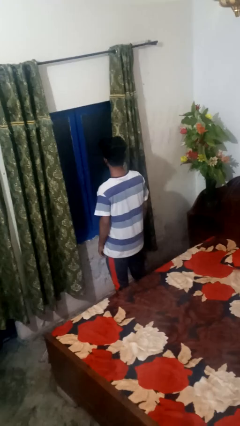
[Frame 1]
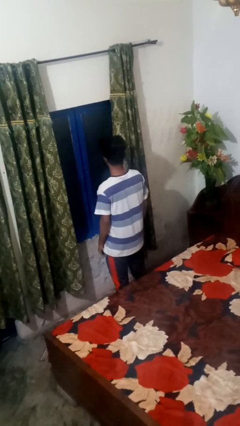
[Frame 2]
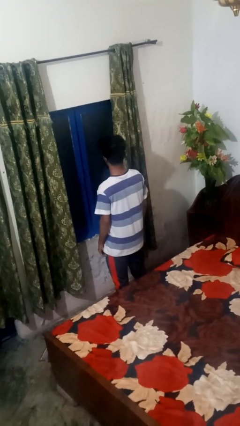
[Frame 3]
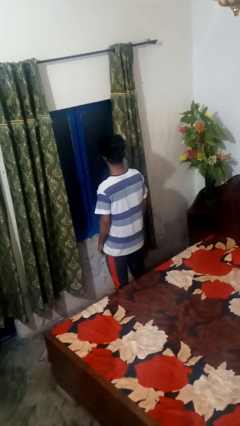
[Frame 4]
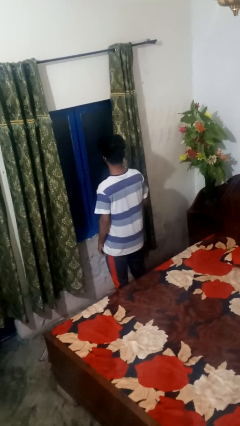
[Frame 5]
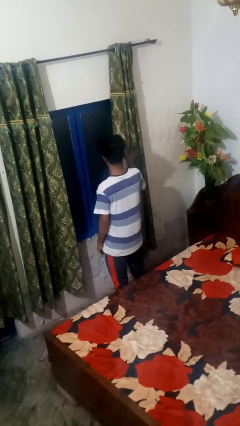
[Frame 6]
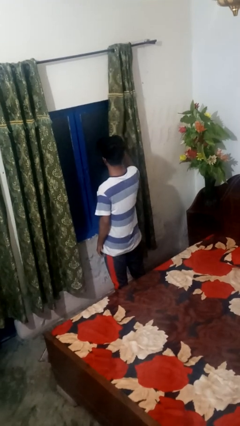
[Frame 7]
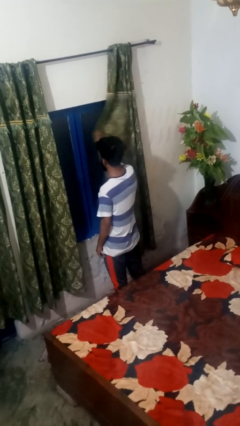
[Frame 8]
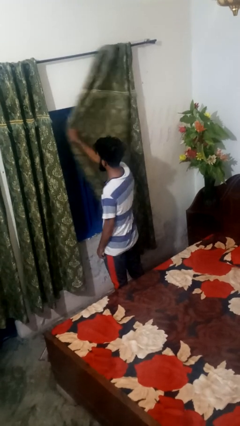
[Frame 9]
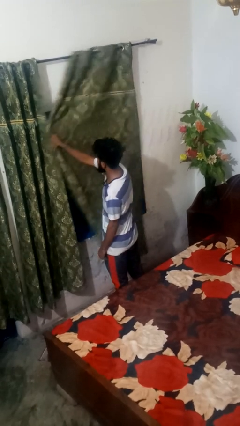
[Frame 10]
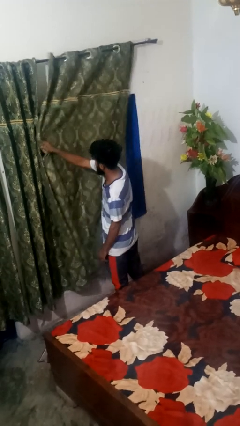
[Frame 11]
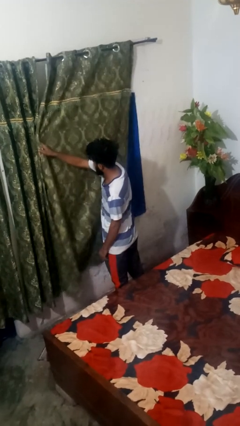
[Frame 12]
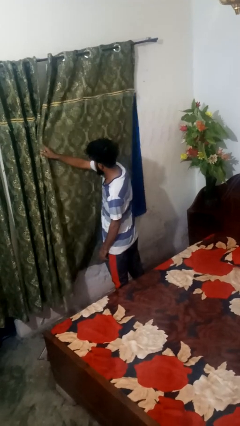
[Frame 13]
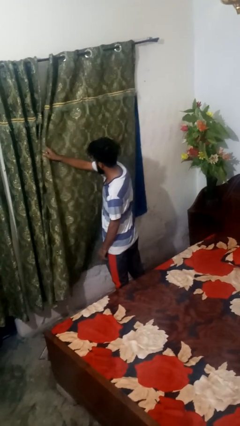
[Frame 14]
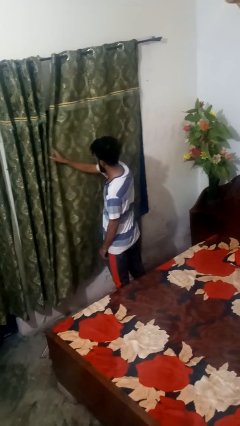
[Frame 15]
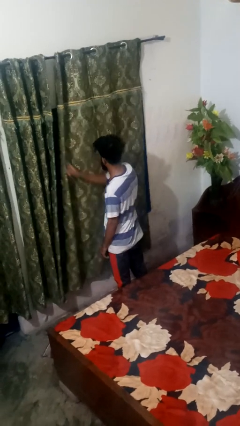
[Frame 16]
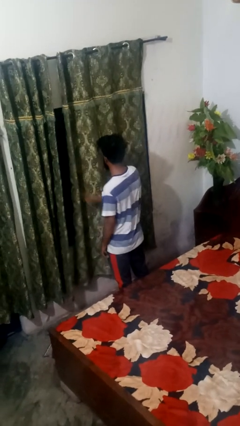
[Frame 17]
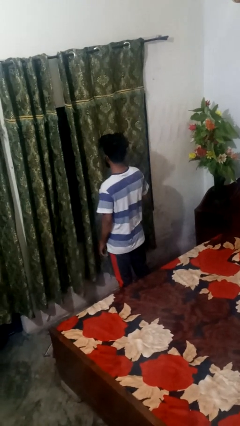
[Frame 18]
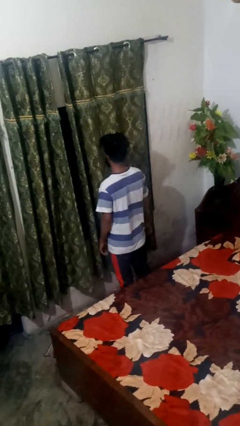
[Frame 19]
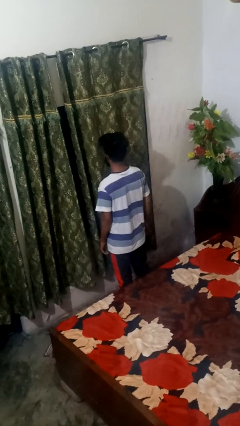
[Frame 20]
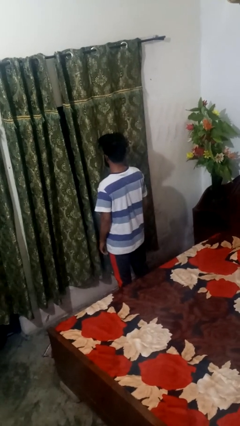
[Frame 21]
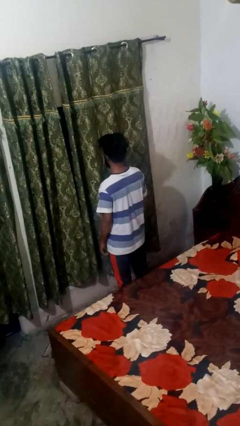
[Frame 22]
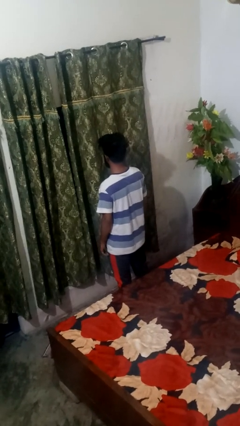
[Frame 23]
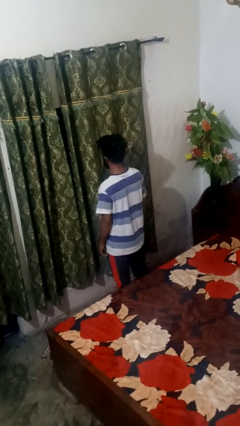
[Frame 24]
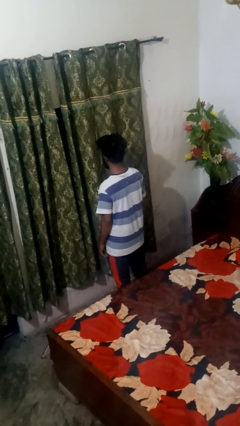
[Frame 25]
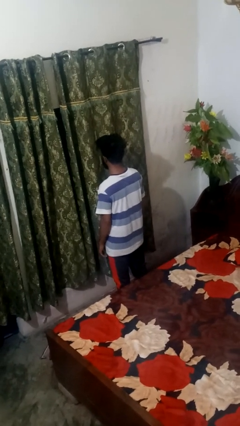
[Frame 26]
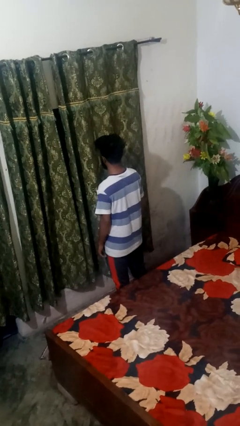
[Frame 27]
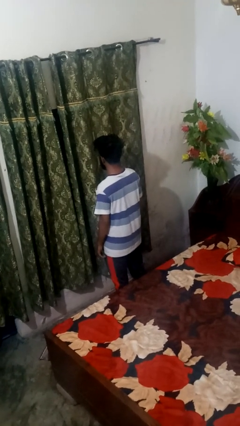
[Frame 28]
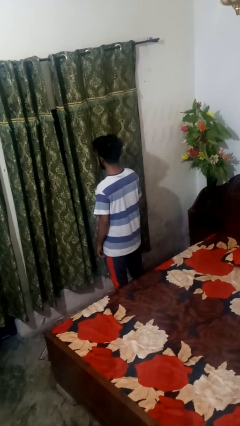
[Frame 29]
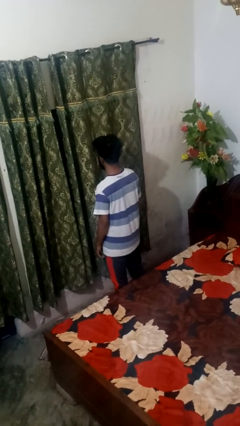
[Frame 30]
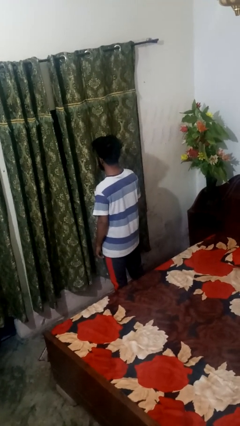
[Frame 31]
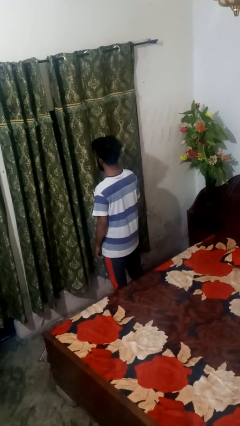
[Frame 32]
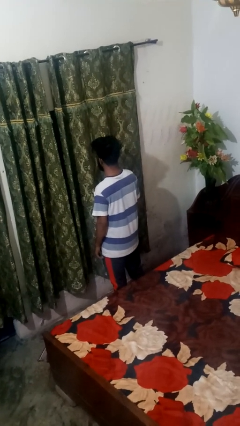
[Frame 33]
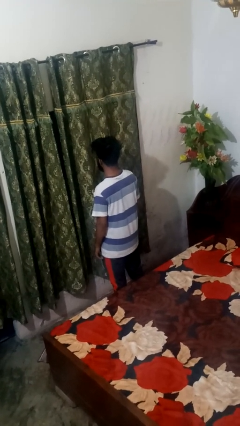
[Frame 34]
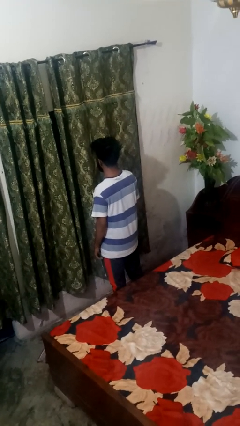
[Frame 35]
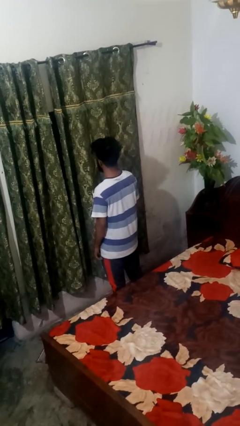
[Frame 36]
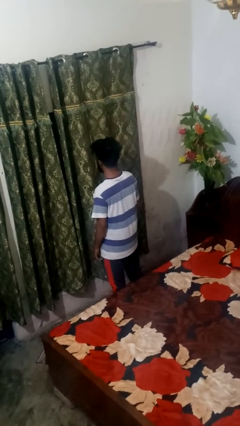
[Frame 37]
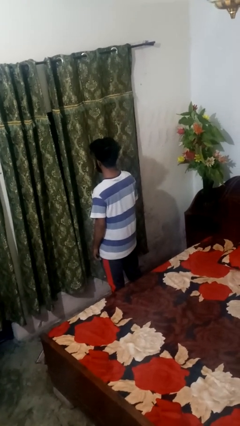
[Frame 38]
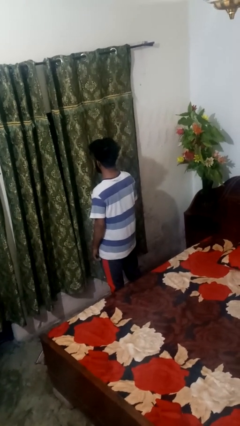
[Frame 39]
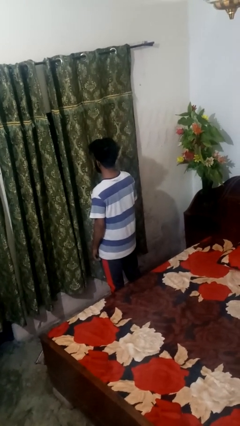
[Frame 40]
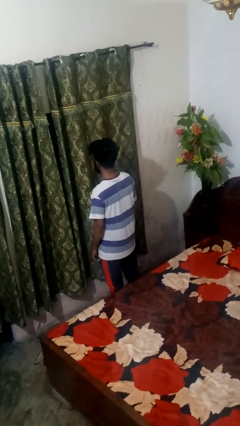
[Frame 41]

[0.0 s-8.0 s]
person closes curtains

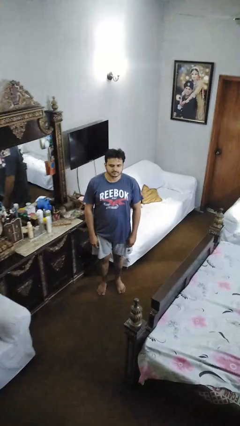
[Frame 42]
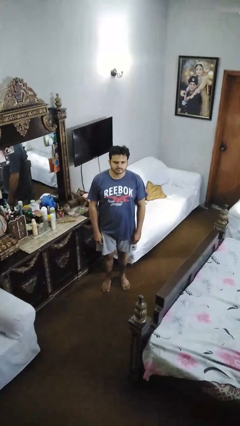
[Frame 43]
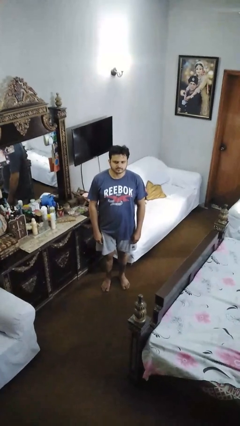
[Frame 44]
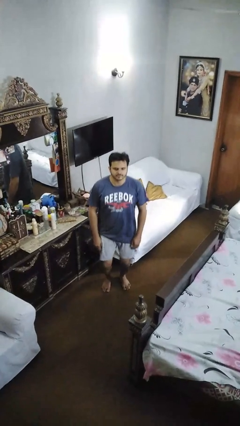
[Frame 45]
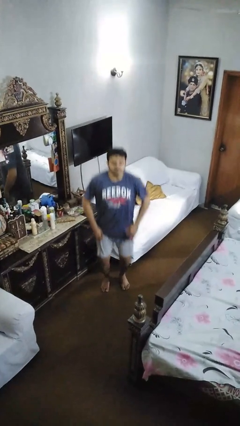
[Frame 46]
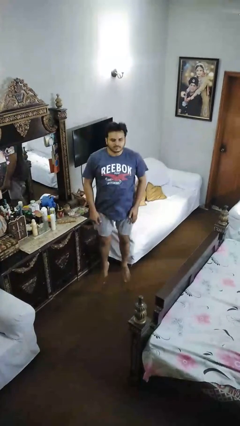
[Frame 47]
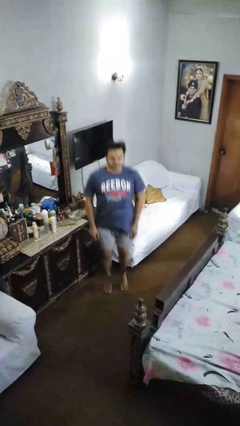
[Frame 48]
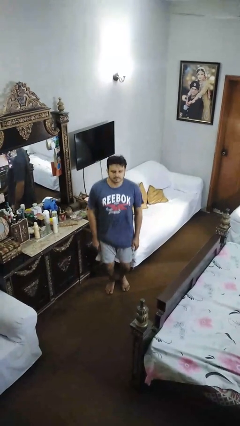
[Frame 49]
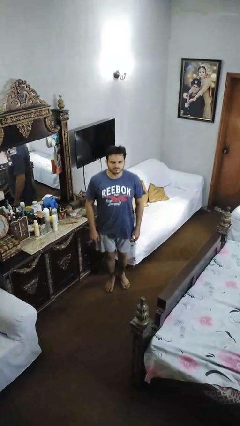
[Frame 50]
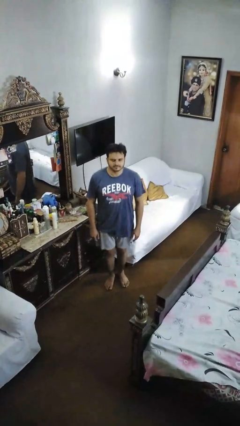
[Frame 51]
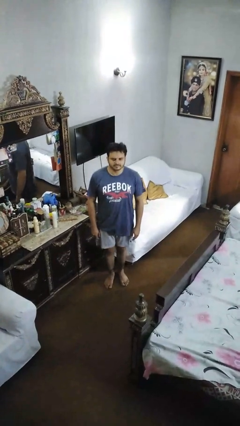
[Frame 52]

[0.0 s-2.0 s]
person jumps

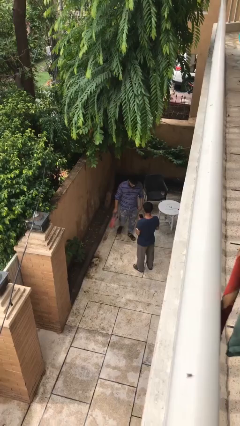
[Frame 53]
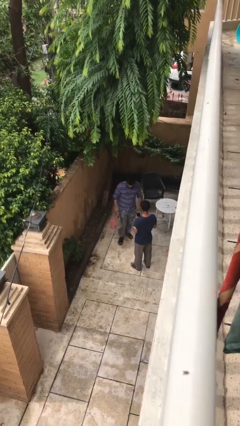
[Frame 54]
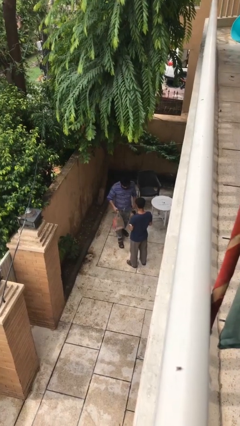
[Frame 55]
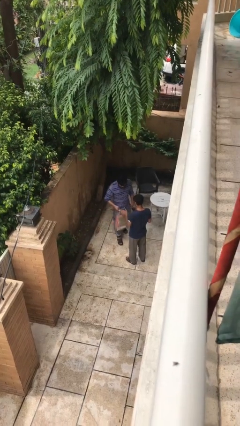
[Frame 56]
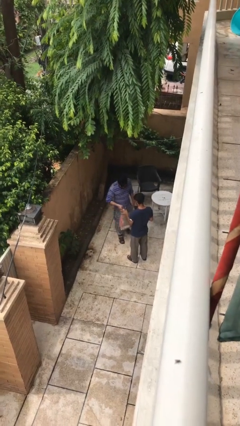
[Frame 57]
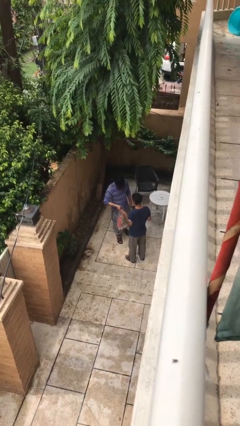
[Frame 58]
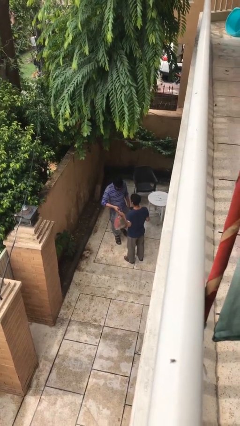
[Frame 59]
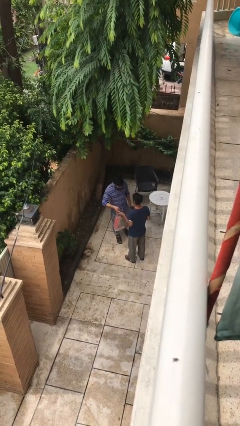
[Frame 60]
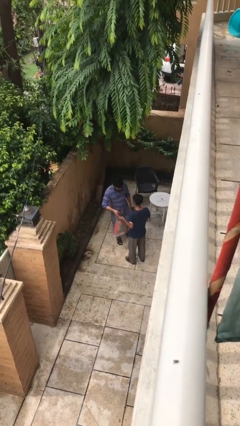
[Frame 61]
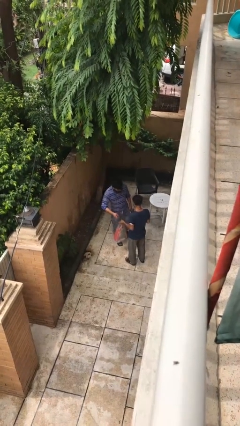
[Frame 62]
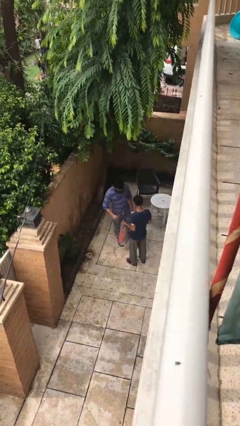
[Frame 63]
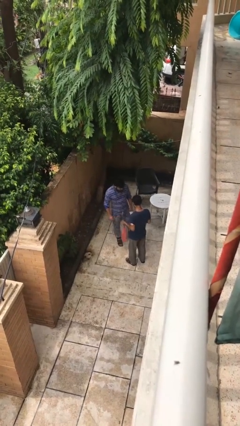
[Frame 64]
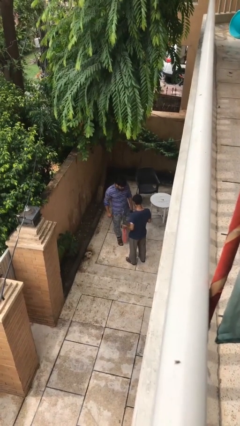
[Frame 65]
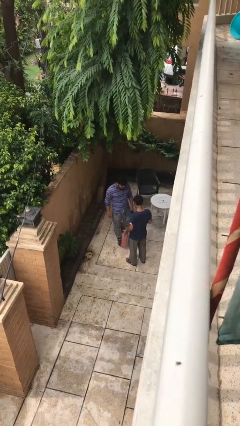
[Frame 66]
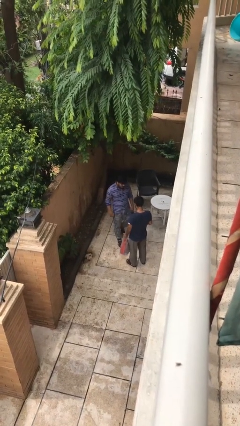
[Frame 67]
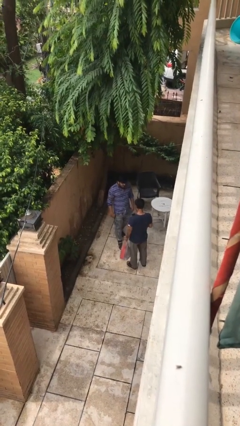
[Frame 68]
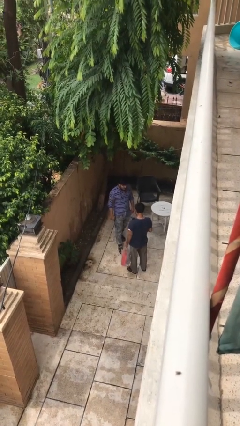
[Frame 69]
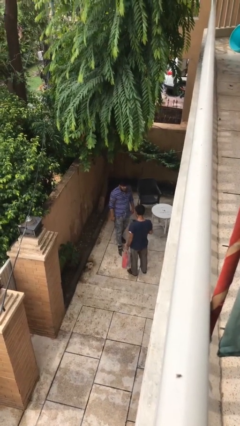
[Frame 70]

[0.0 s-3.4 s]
person transfers object to person

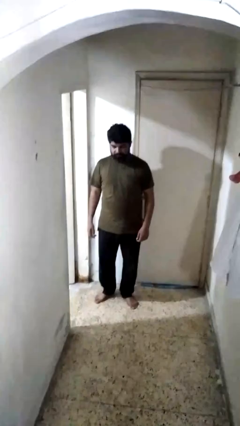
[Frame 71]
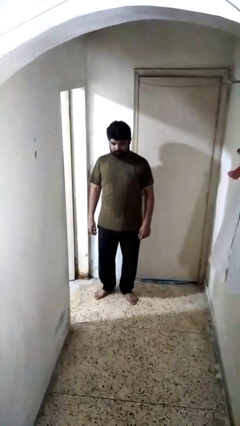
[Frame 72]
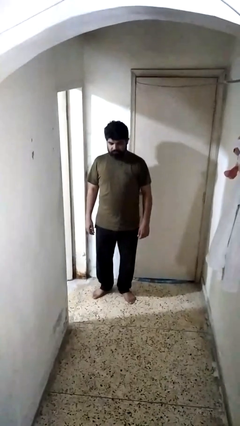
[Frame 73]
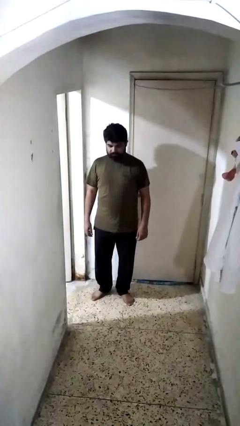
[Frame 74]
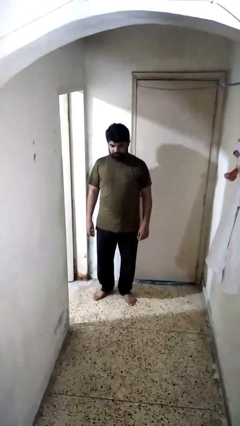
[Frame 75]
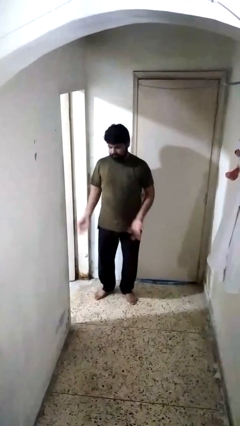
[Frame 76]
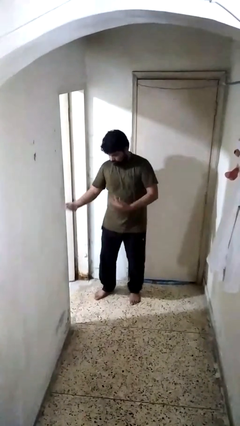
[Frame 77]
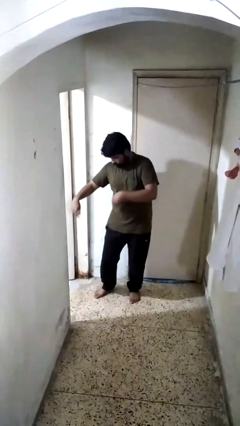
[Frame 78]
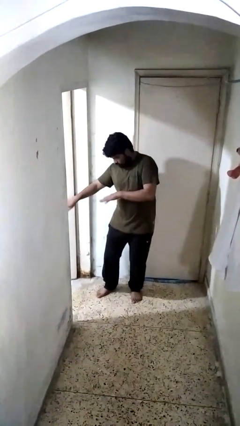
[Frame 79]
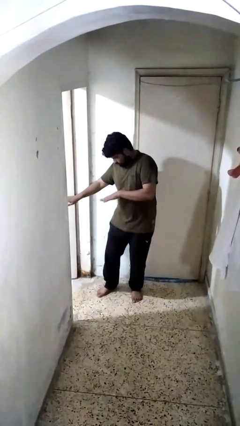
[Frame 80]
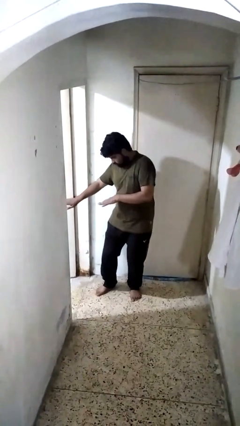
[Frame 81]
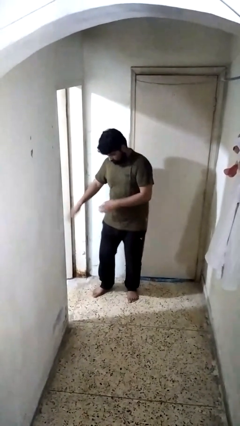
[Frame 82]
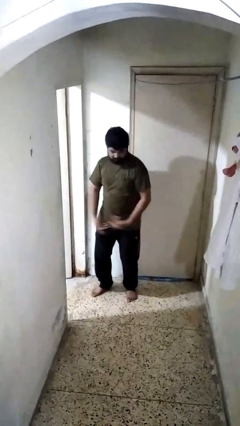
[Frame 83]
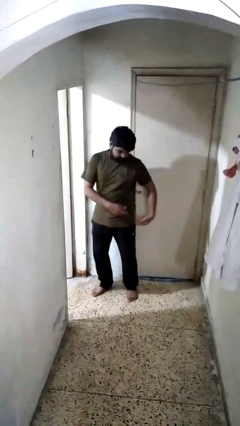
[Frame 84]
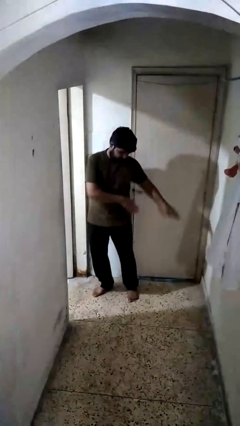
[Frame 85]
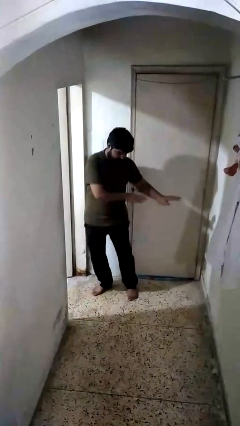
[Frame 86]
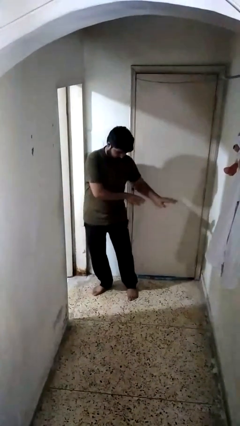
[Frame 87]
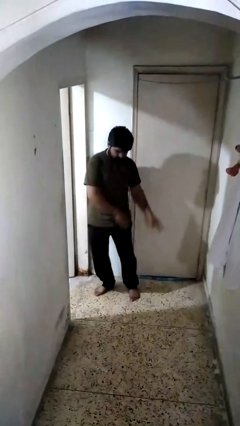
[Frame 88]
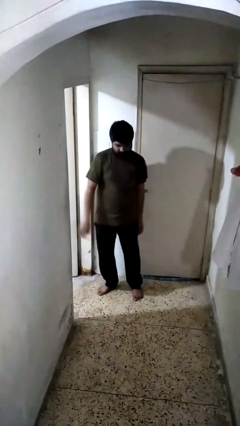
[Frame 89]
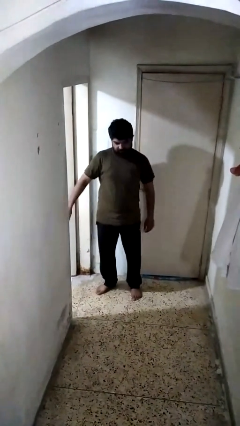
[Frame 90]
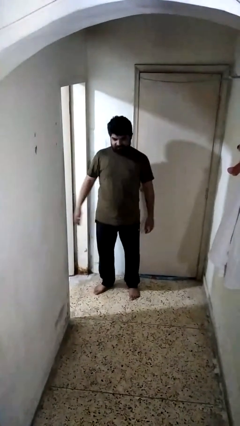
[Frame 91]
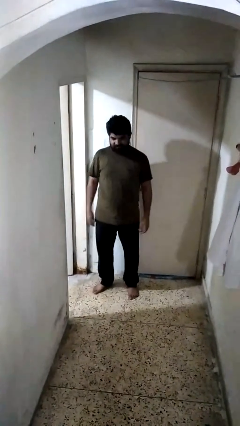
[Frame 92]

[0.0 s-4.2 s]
person dances in place

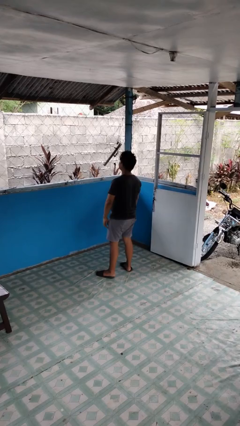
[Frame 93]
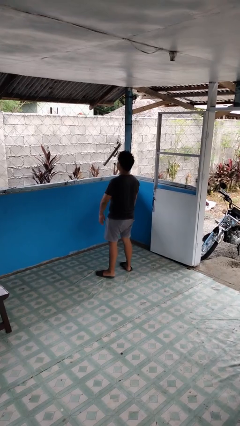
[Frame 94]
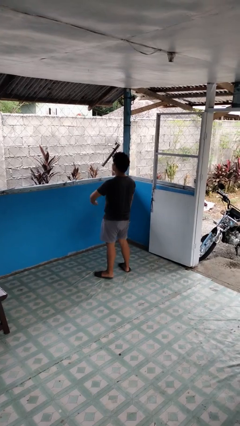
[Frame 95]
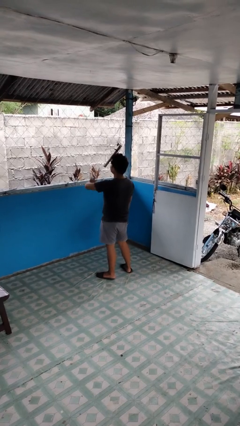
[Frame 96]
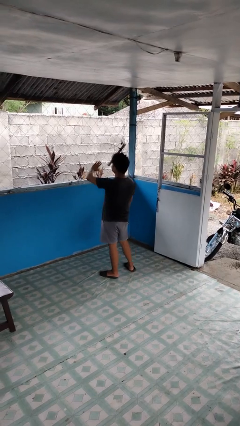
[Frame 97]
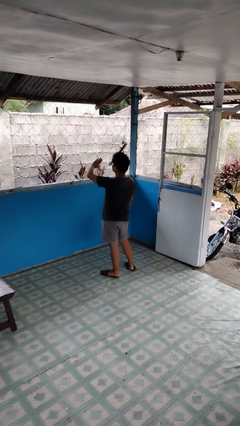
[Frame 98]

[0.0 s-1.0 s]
person gestures swipe up
